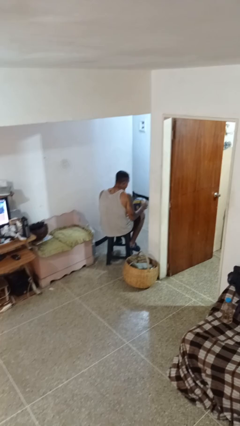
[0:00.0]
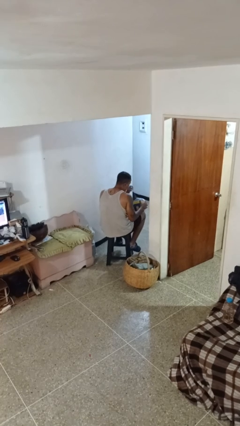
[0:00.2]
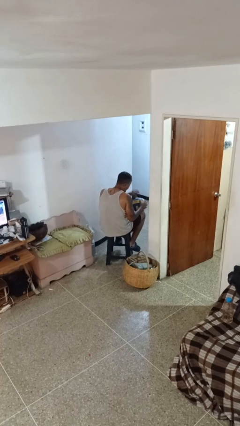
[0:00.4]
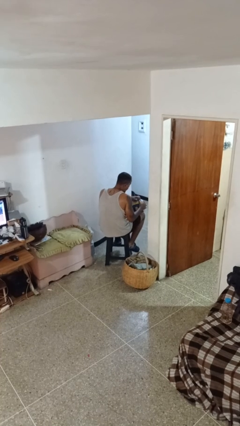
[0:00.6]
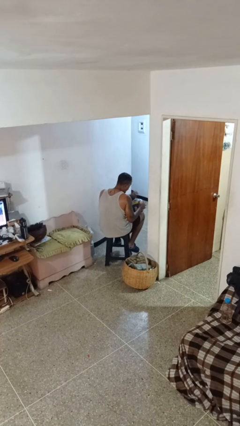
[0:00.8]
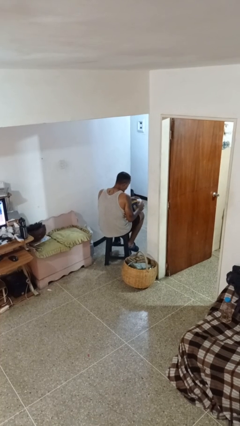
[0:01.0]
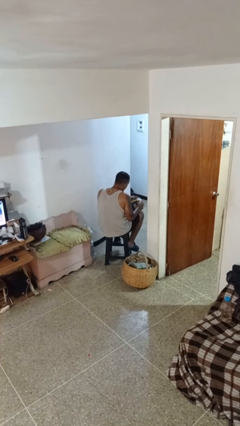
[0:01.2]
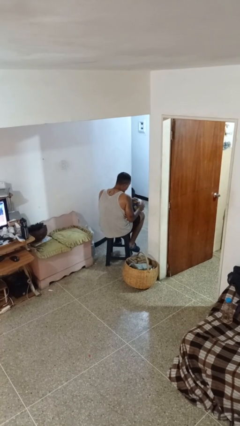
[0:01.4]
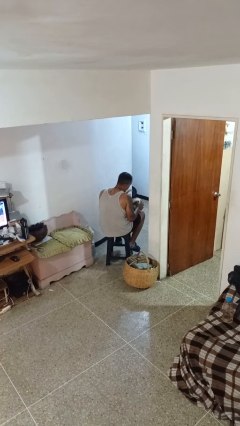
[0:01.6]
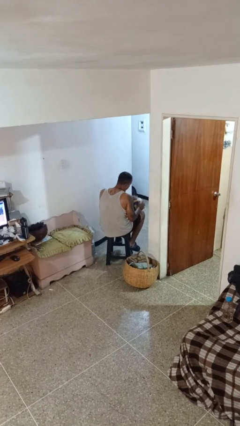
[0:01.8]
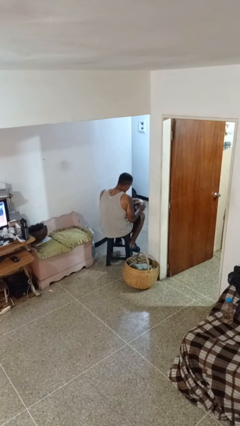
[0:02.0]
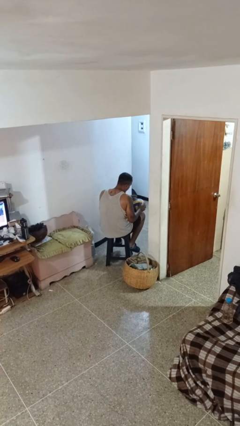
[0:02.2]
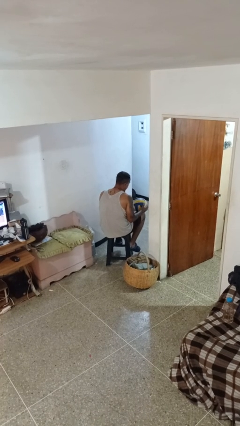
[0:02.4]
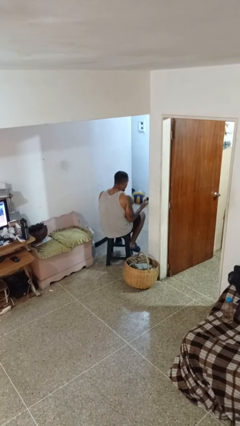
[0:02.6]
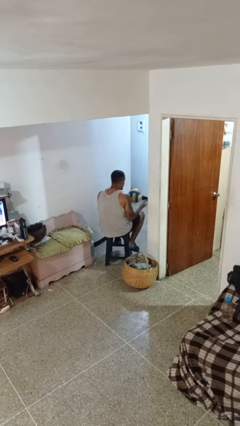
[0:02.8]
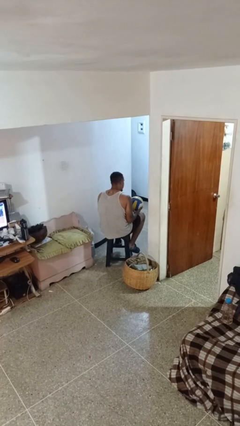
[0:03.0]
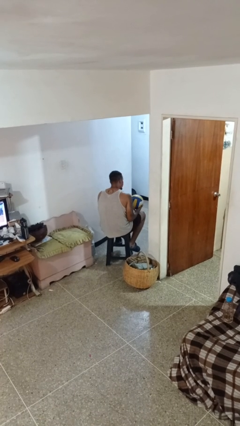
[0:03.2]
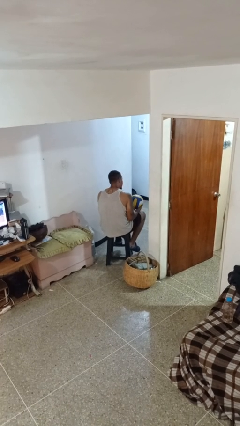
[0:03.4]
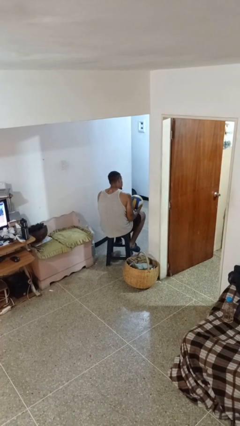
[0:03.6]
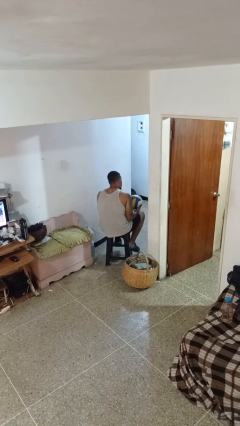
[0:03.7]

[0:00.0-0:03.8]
person taps object with finger

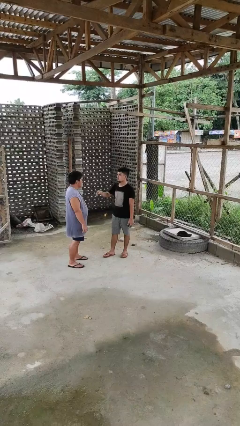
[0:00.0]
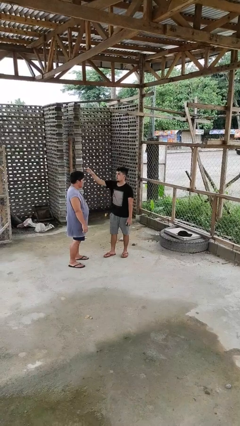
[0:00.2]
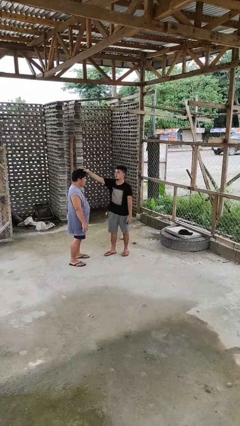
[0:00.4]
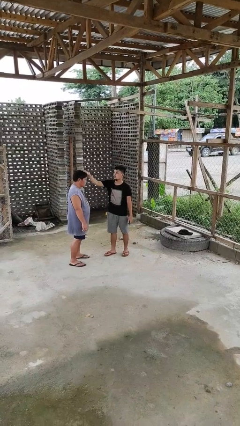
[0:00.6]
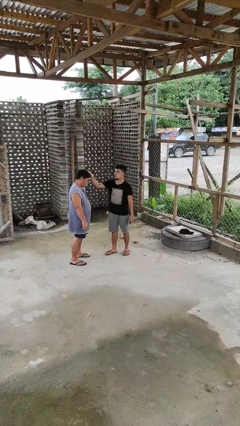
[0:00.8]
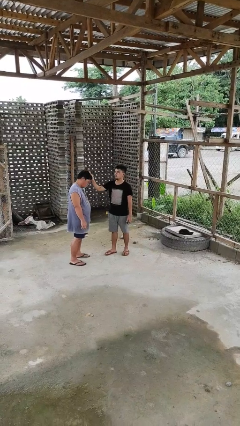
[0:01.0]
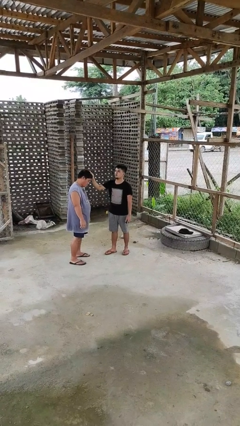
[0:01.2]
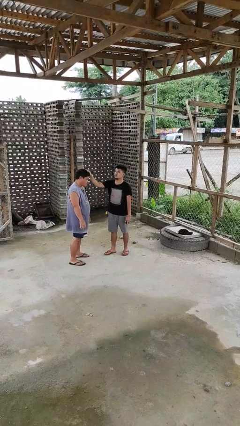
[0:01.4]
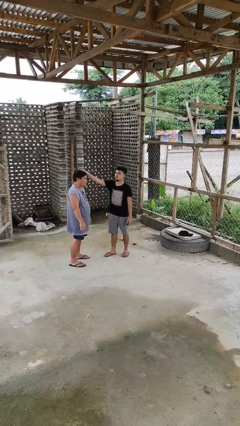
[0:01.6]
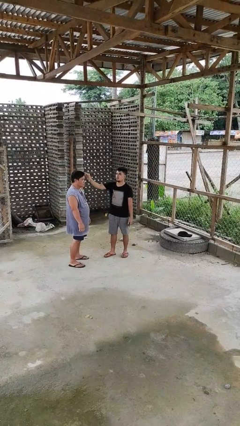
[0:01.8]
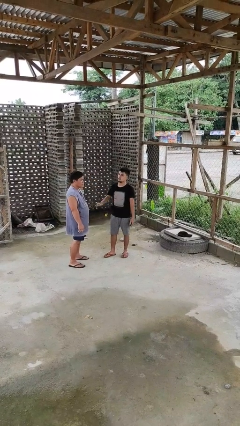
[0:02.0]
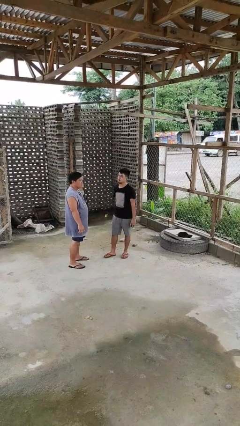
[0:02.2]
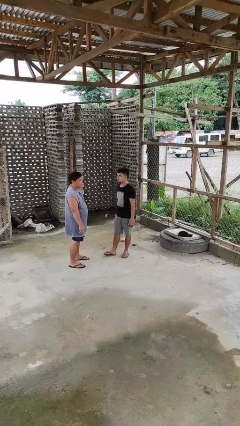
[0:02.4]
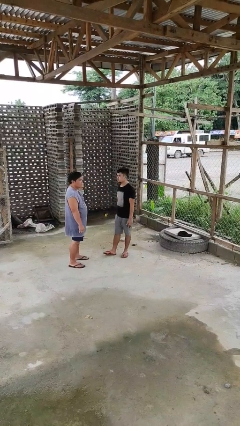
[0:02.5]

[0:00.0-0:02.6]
person grabs person by hair

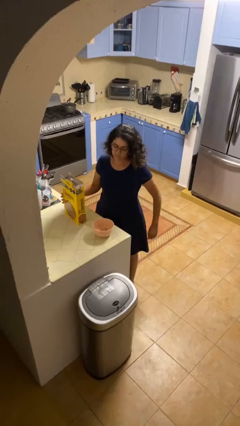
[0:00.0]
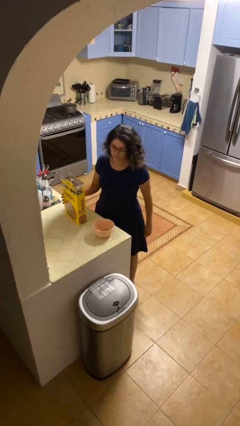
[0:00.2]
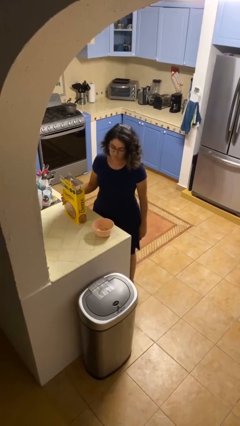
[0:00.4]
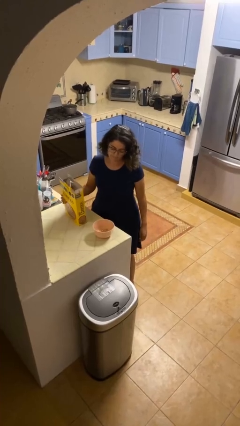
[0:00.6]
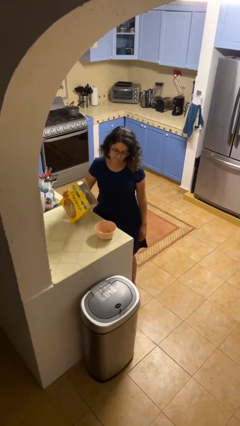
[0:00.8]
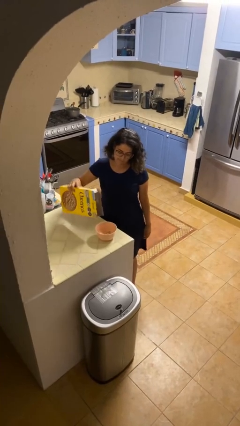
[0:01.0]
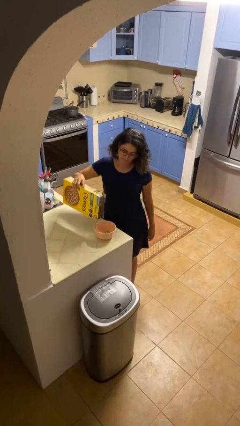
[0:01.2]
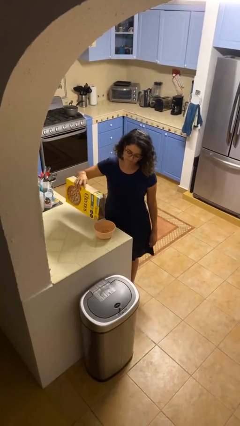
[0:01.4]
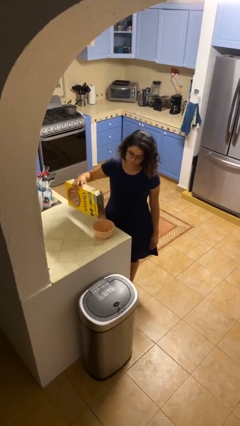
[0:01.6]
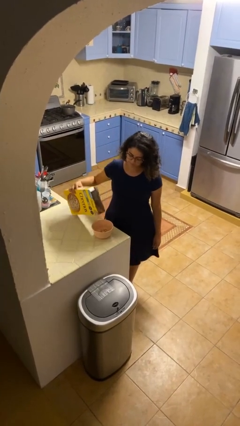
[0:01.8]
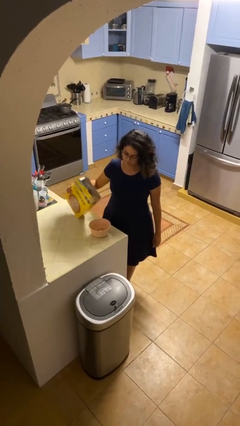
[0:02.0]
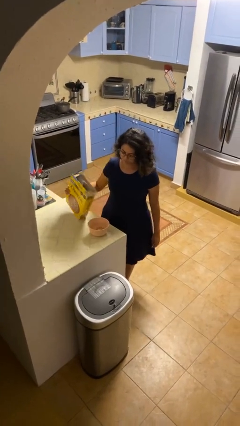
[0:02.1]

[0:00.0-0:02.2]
person pours into bowl

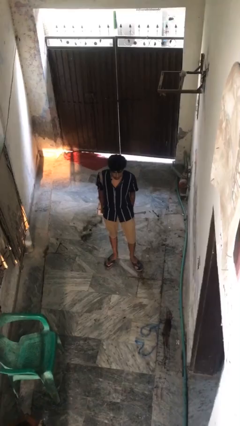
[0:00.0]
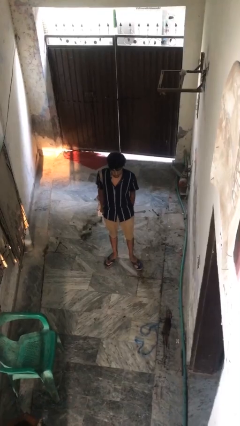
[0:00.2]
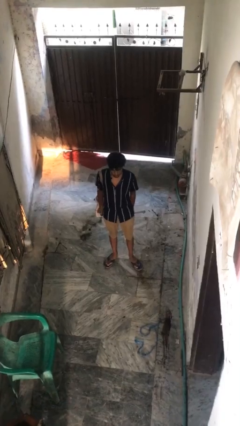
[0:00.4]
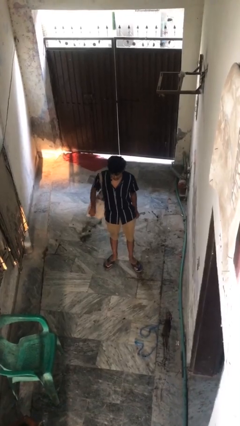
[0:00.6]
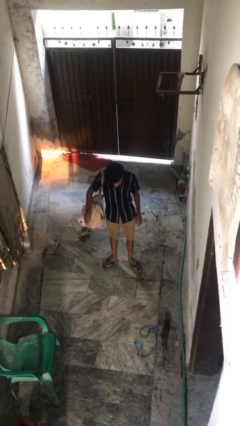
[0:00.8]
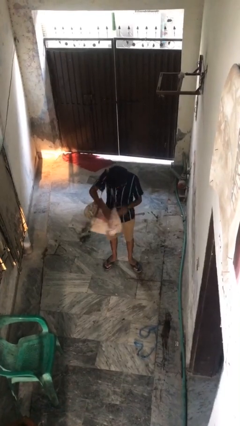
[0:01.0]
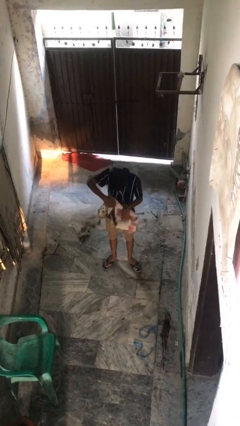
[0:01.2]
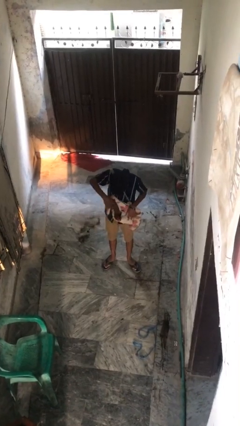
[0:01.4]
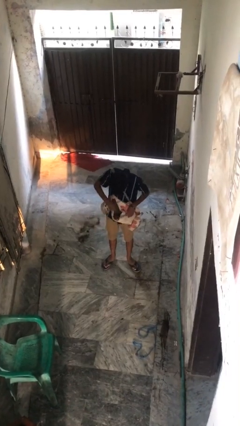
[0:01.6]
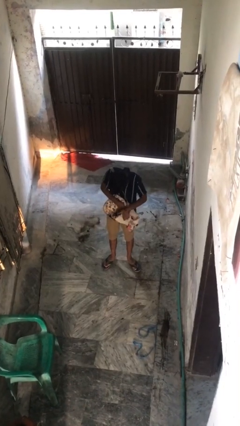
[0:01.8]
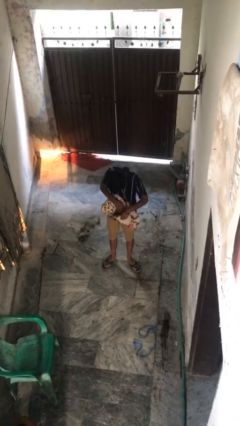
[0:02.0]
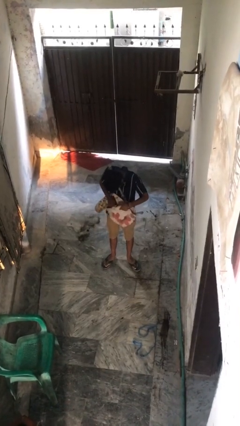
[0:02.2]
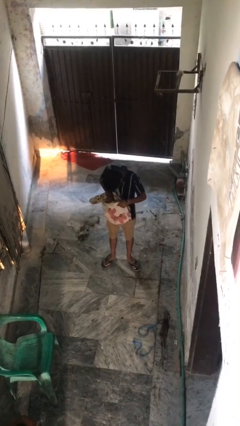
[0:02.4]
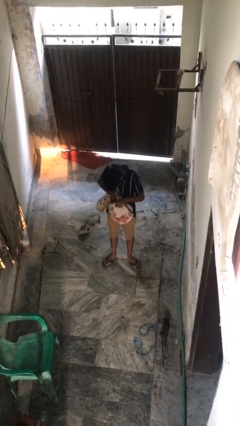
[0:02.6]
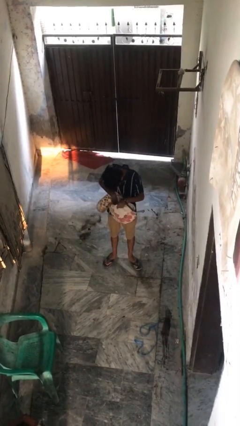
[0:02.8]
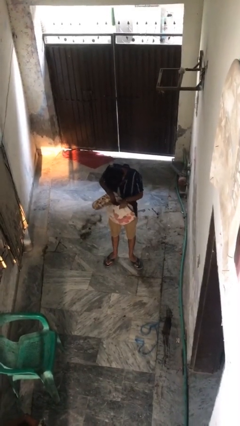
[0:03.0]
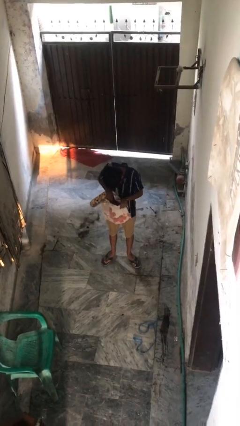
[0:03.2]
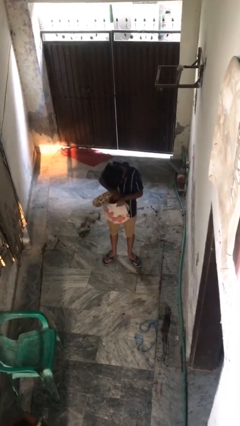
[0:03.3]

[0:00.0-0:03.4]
person searches in backpack

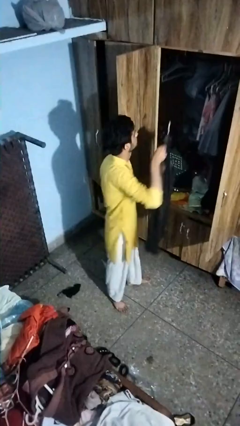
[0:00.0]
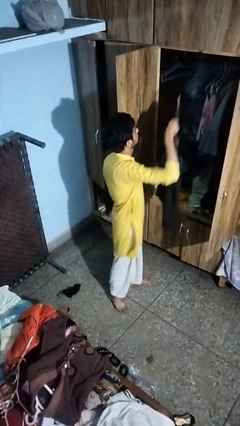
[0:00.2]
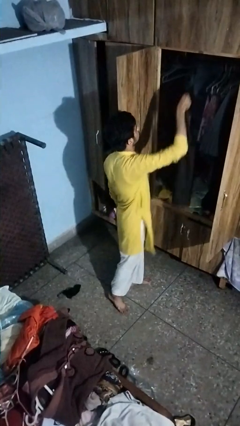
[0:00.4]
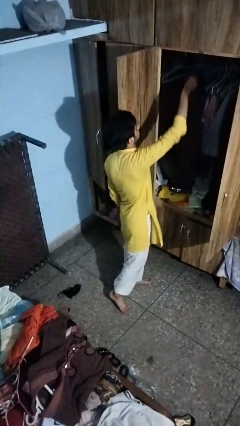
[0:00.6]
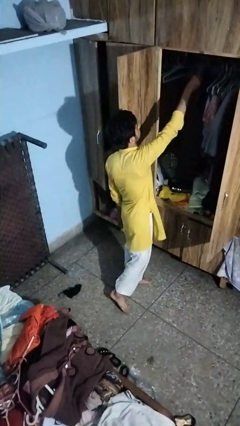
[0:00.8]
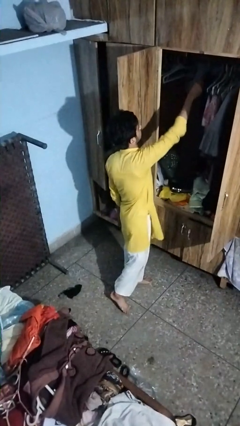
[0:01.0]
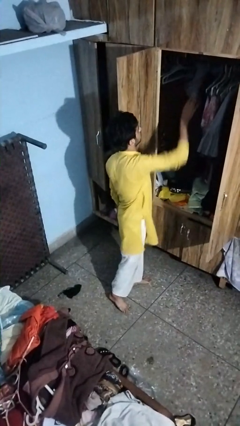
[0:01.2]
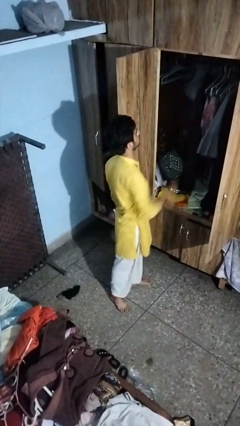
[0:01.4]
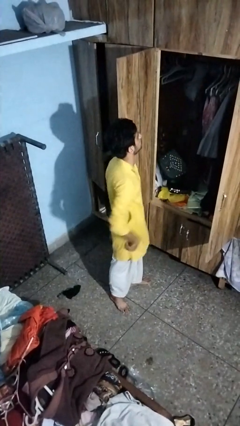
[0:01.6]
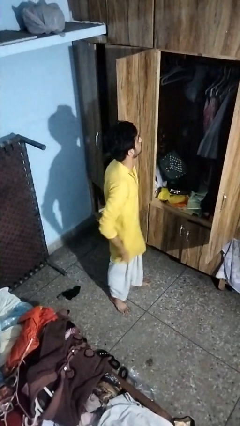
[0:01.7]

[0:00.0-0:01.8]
person puts clothes into closet

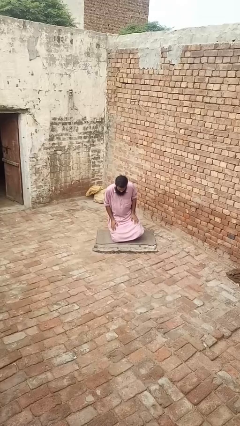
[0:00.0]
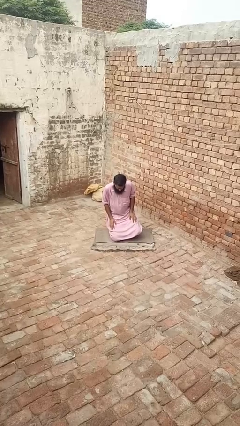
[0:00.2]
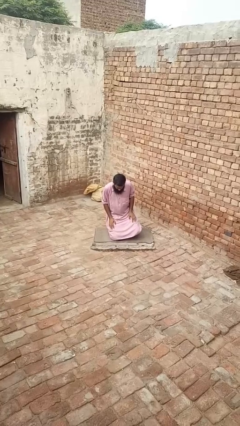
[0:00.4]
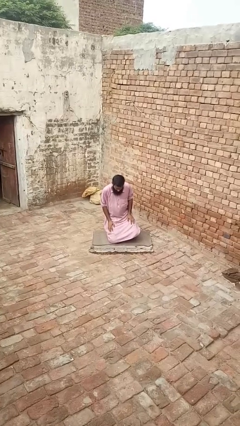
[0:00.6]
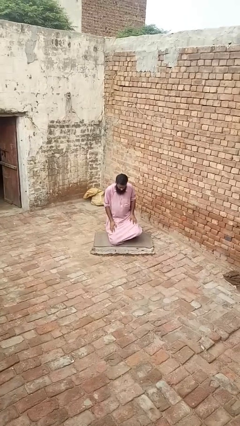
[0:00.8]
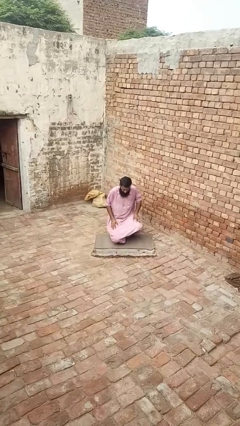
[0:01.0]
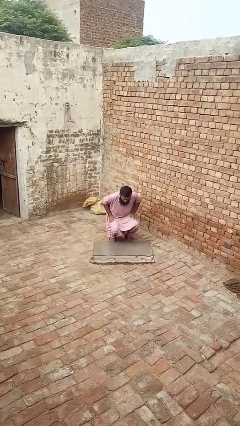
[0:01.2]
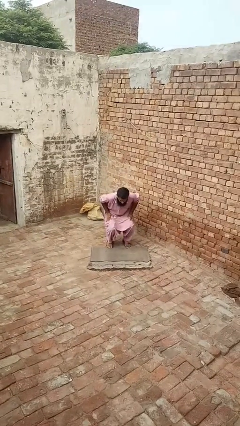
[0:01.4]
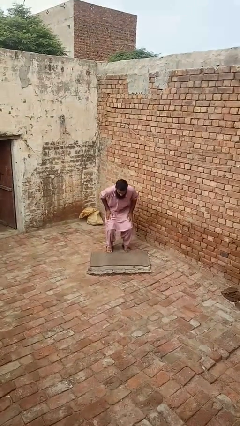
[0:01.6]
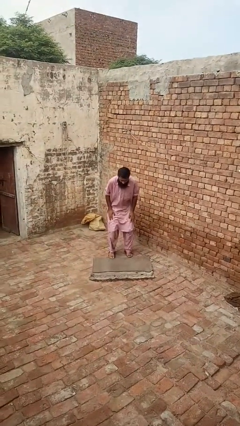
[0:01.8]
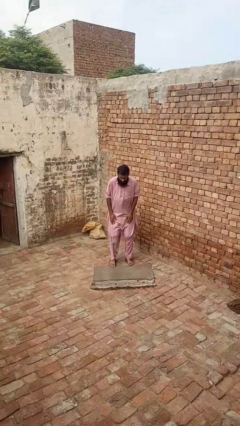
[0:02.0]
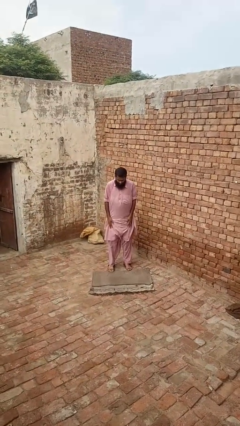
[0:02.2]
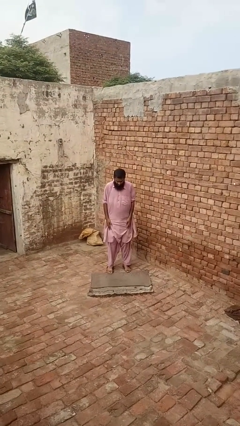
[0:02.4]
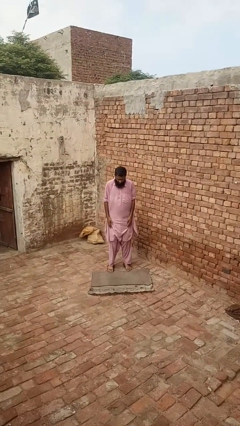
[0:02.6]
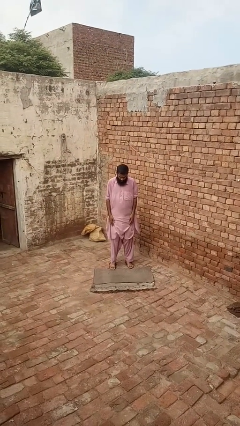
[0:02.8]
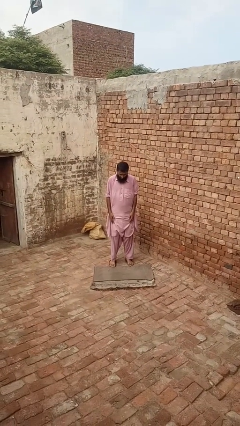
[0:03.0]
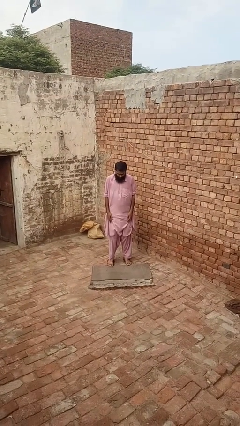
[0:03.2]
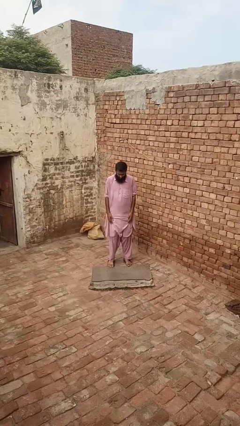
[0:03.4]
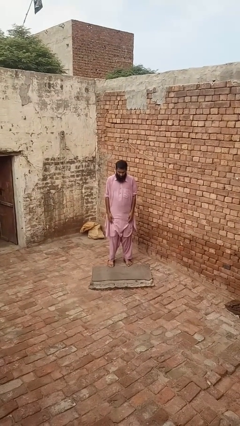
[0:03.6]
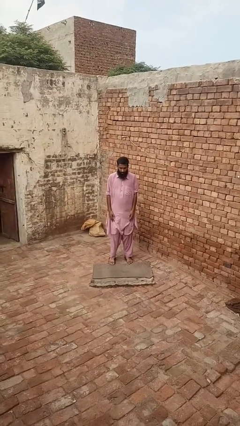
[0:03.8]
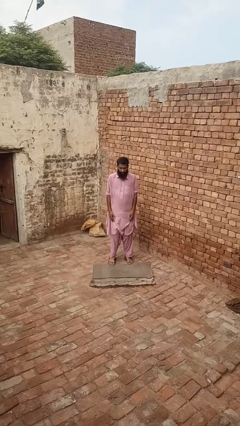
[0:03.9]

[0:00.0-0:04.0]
person stands up from floor
